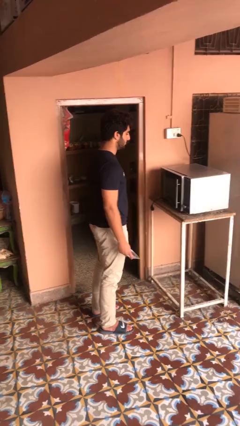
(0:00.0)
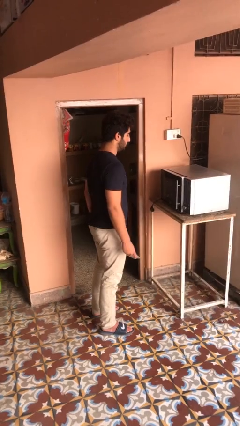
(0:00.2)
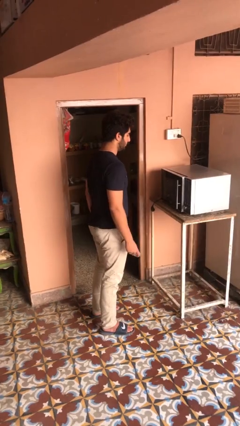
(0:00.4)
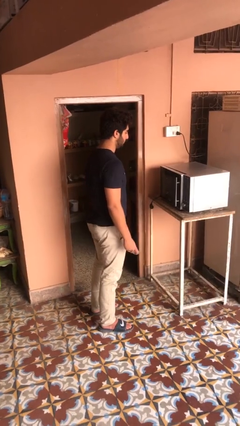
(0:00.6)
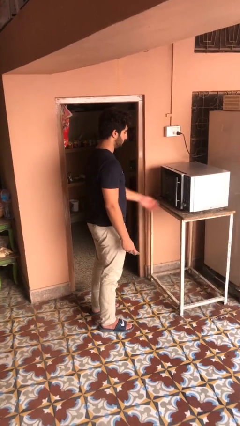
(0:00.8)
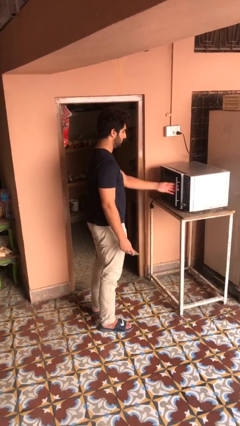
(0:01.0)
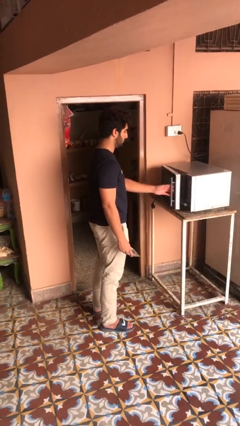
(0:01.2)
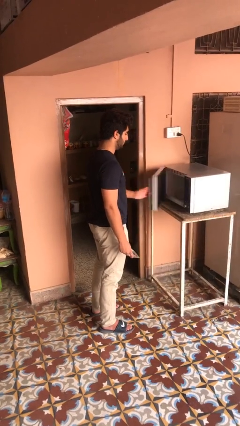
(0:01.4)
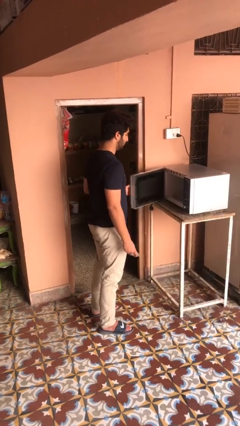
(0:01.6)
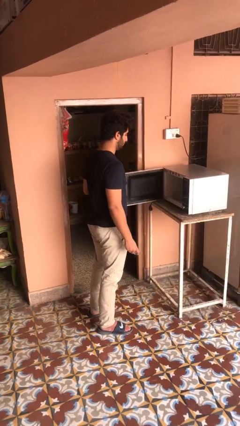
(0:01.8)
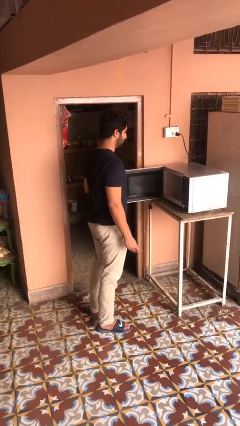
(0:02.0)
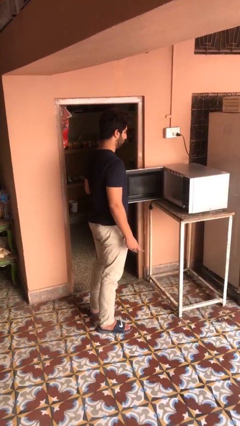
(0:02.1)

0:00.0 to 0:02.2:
person opens microwave

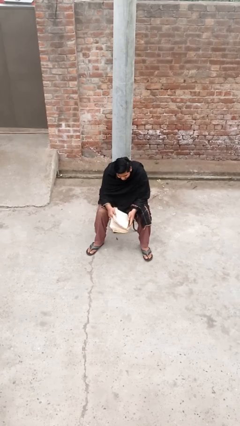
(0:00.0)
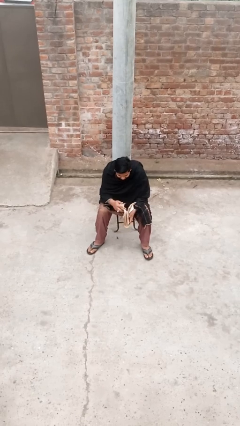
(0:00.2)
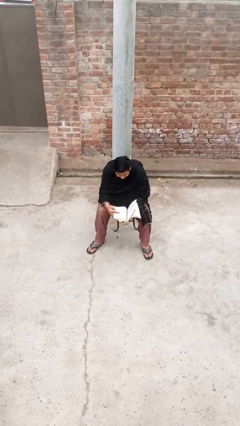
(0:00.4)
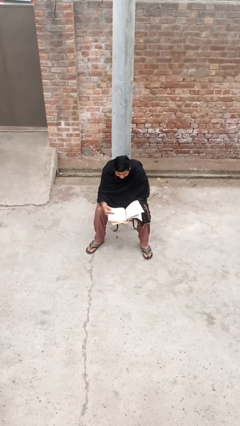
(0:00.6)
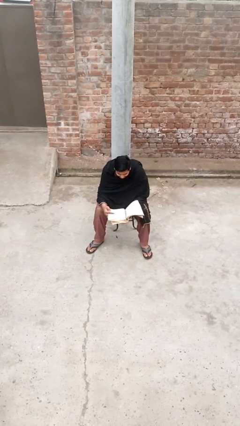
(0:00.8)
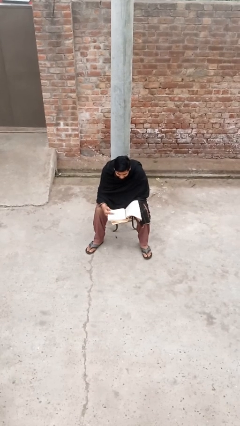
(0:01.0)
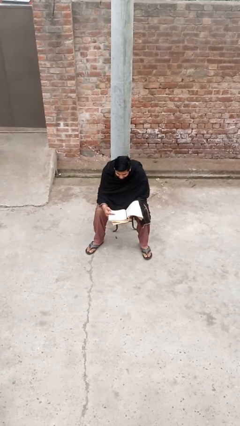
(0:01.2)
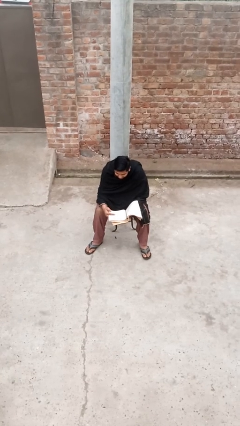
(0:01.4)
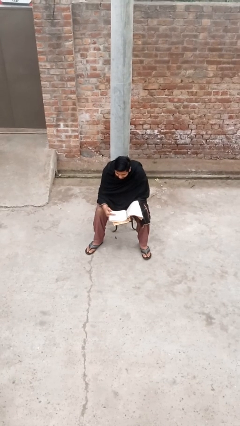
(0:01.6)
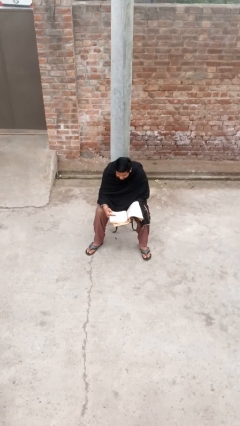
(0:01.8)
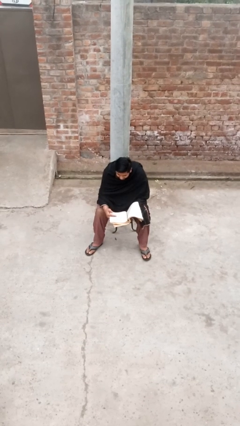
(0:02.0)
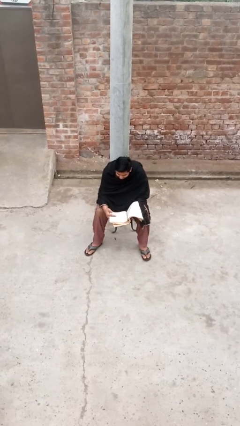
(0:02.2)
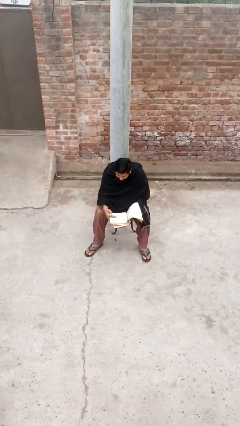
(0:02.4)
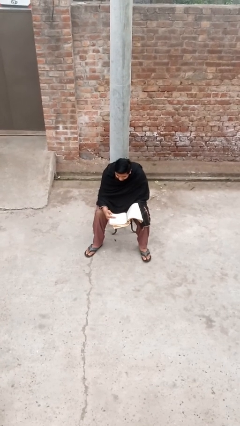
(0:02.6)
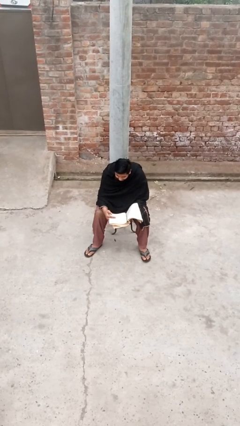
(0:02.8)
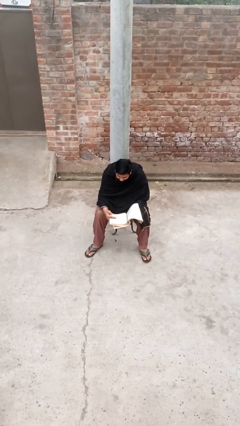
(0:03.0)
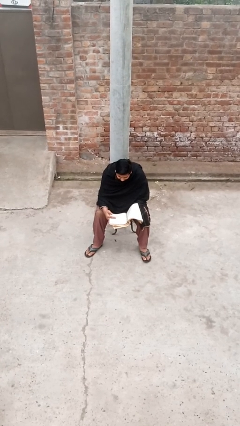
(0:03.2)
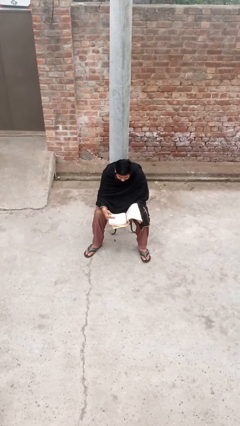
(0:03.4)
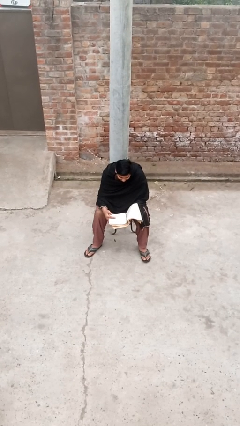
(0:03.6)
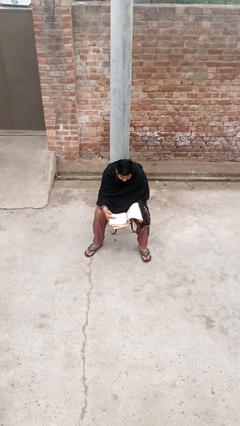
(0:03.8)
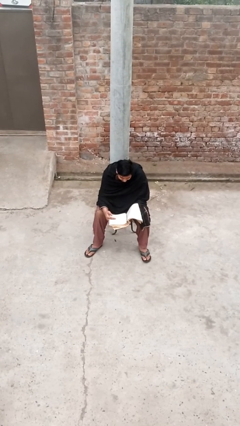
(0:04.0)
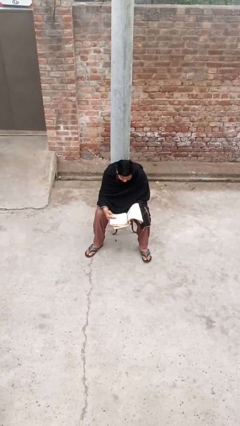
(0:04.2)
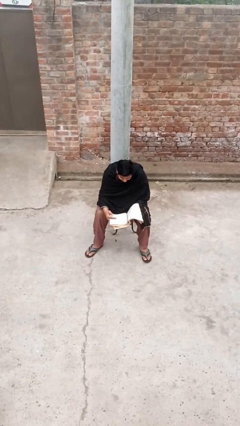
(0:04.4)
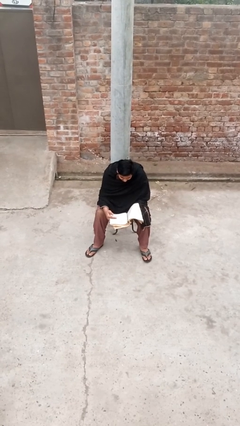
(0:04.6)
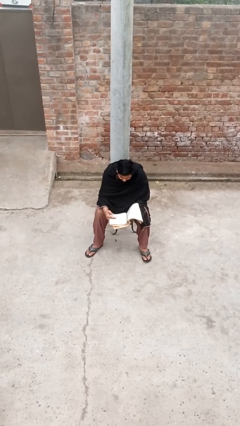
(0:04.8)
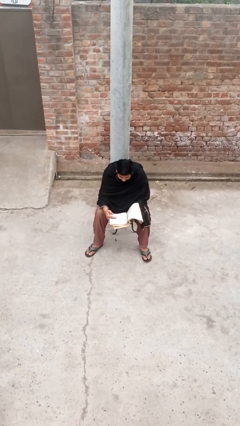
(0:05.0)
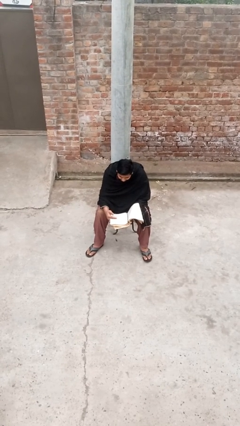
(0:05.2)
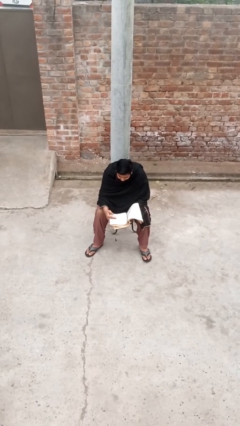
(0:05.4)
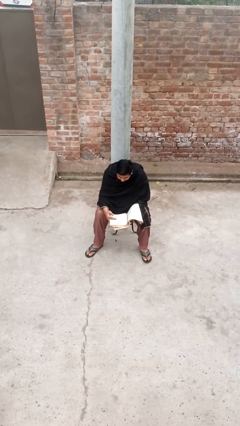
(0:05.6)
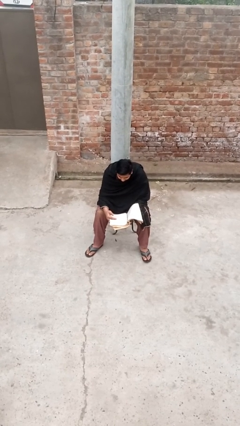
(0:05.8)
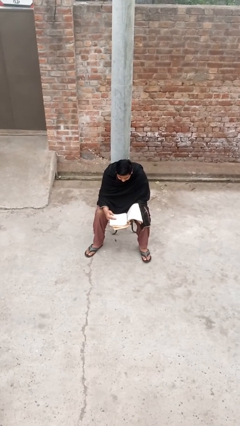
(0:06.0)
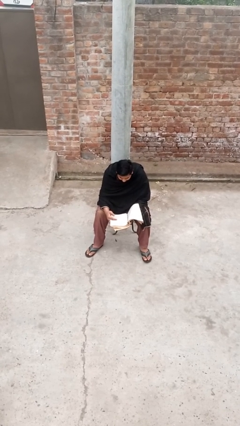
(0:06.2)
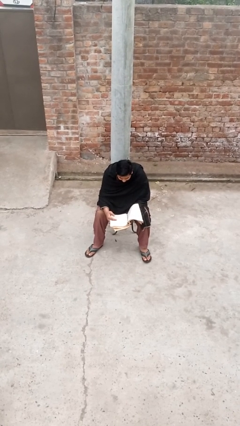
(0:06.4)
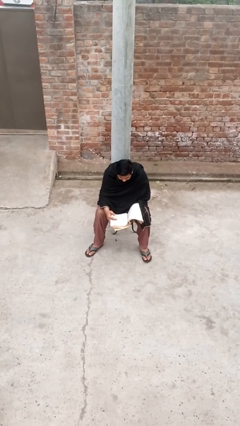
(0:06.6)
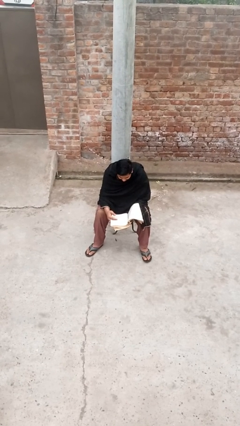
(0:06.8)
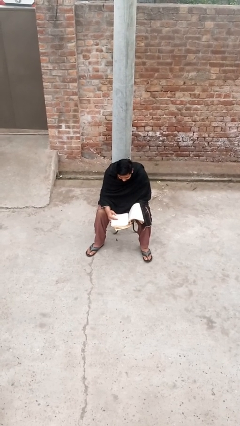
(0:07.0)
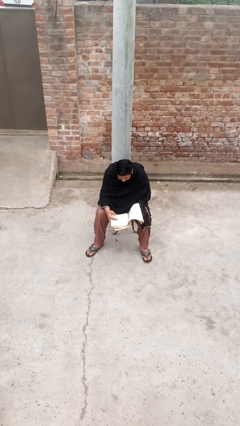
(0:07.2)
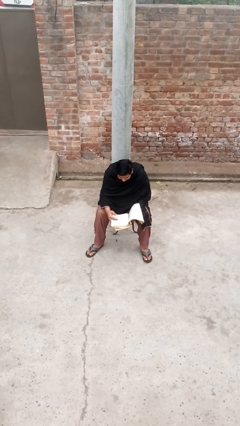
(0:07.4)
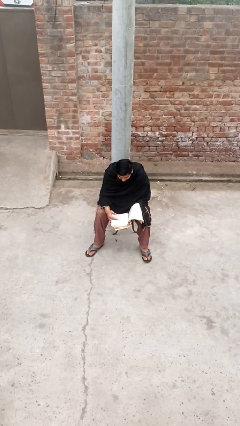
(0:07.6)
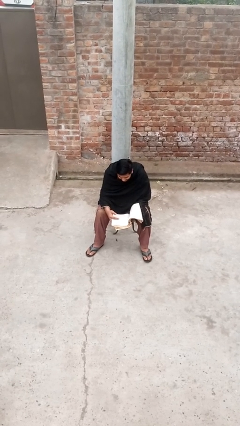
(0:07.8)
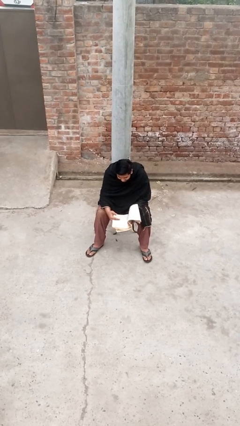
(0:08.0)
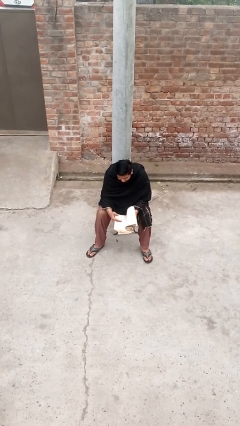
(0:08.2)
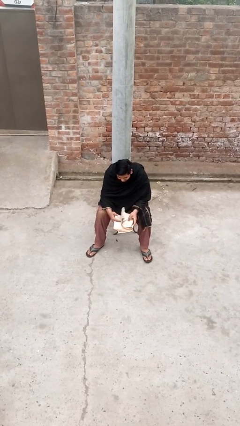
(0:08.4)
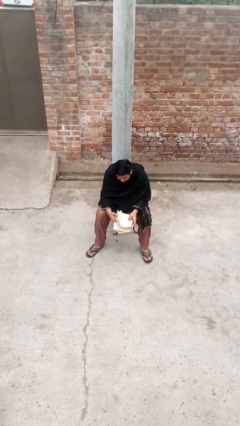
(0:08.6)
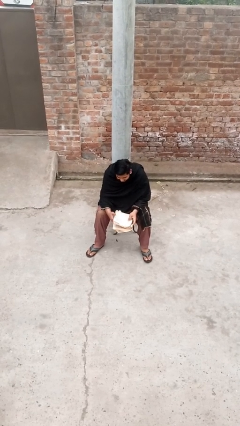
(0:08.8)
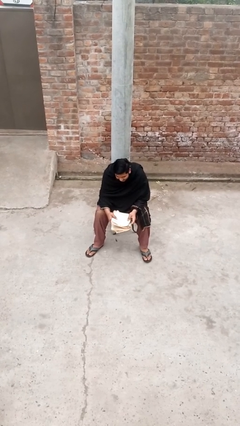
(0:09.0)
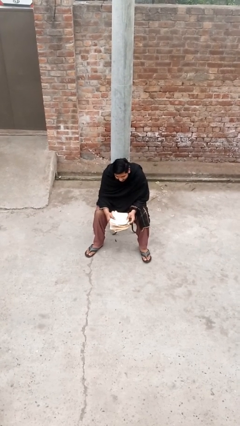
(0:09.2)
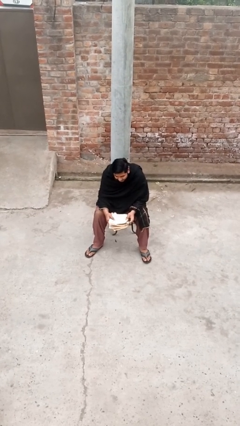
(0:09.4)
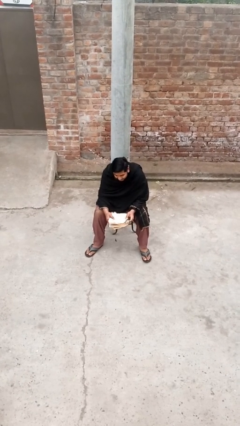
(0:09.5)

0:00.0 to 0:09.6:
person reads document

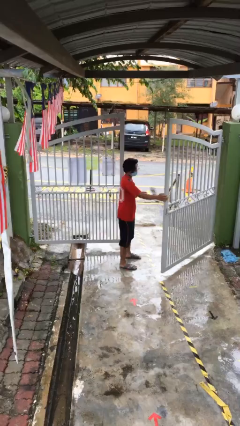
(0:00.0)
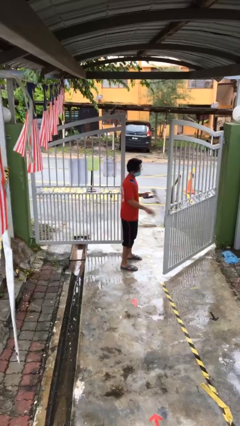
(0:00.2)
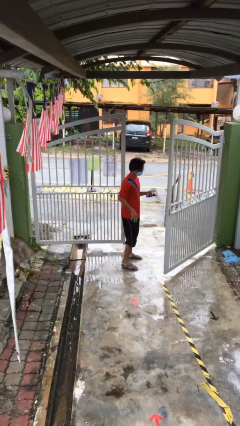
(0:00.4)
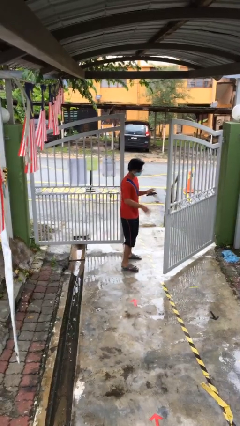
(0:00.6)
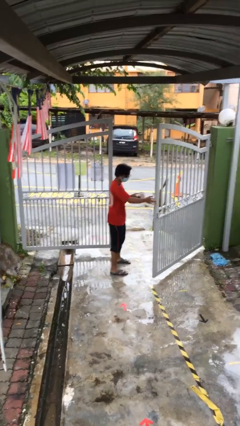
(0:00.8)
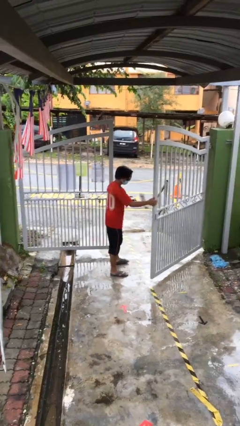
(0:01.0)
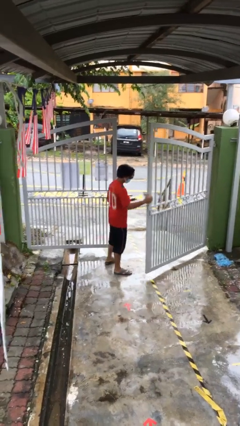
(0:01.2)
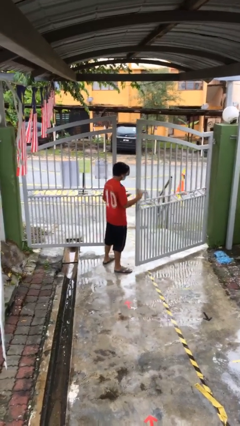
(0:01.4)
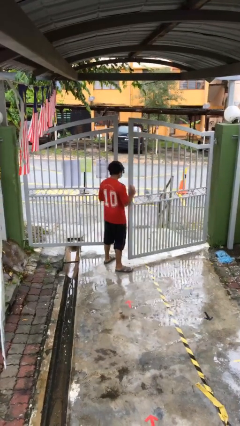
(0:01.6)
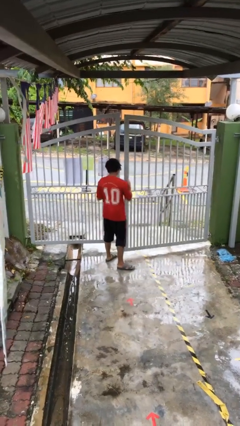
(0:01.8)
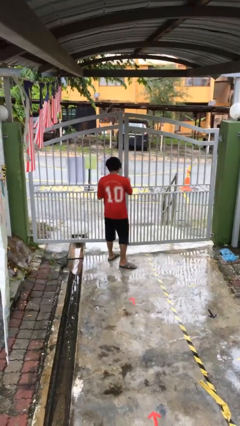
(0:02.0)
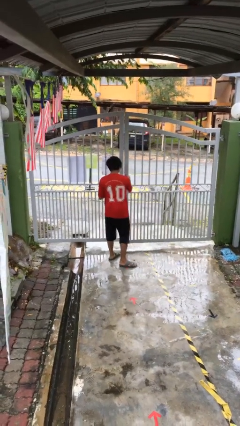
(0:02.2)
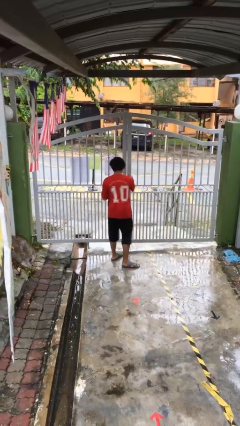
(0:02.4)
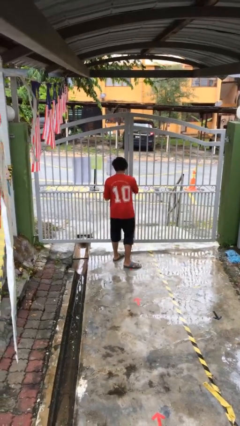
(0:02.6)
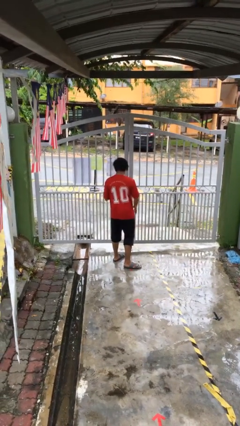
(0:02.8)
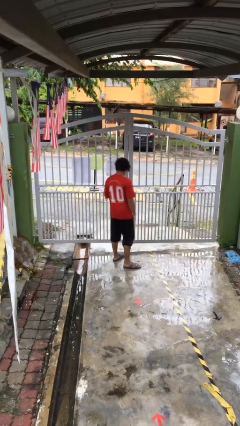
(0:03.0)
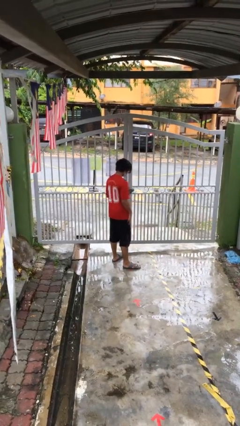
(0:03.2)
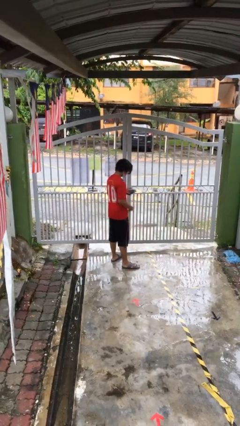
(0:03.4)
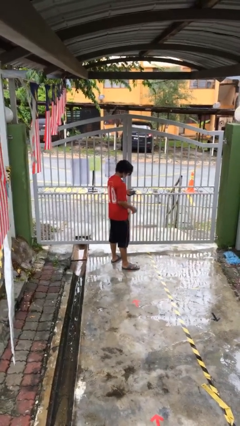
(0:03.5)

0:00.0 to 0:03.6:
person closes facility door

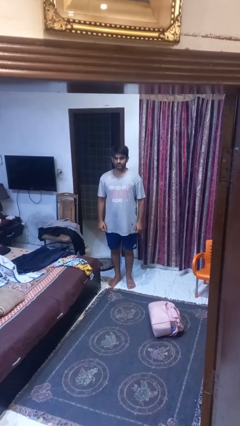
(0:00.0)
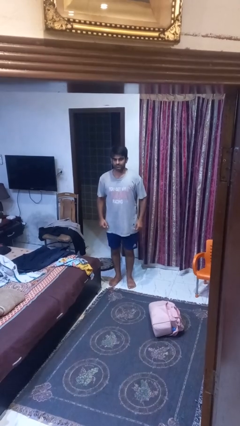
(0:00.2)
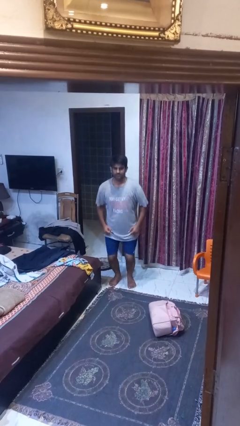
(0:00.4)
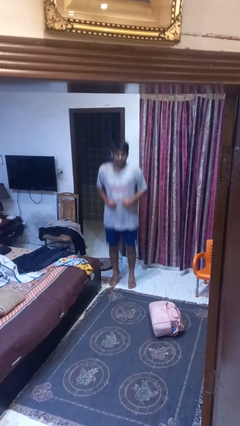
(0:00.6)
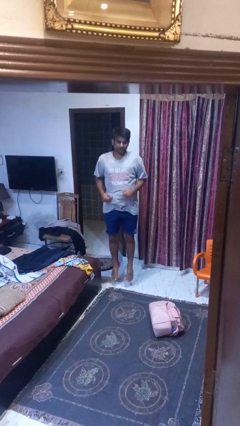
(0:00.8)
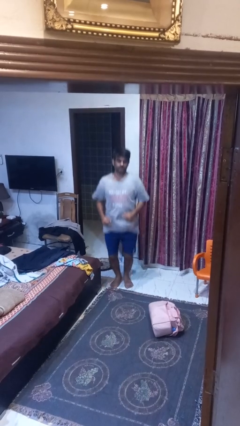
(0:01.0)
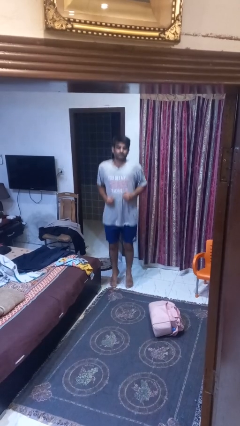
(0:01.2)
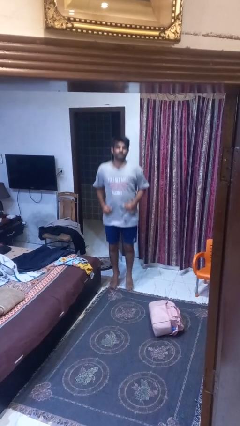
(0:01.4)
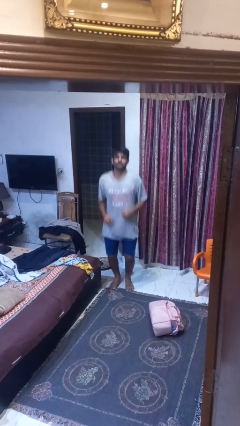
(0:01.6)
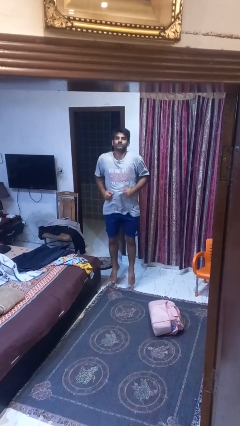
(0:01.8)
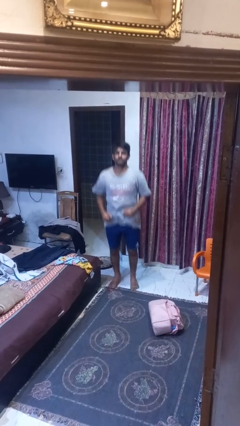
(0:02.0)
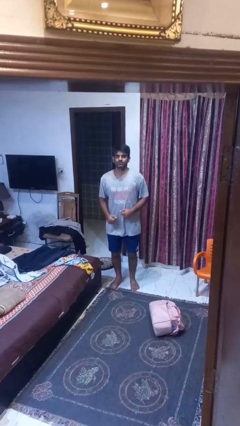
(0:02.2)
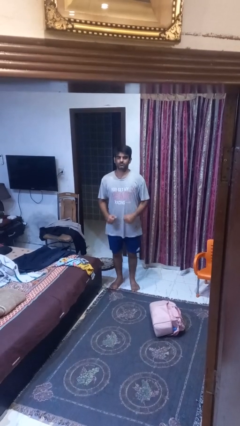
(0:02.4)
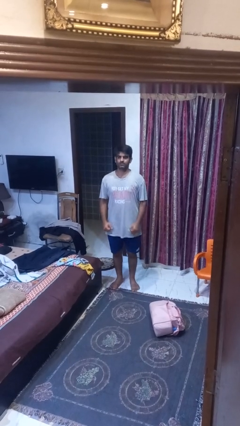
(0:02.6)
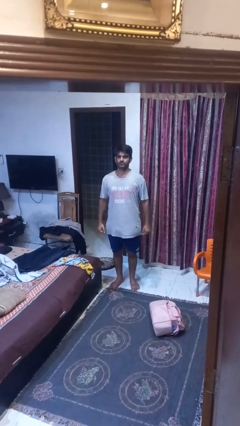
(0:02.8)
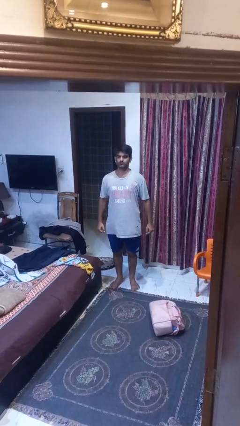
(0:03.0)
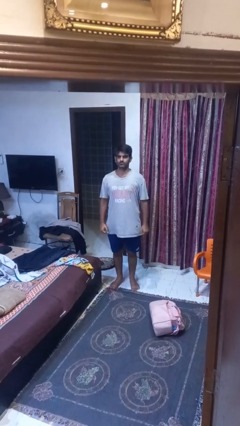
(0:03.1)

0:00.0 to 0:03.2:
person jumps
